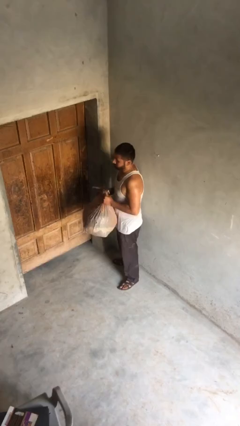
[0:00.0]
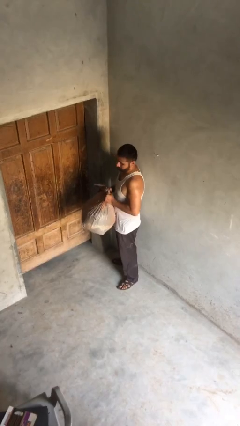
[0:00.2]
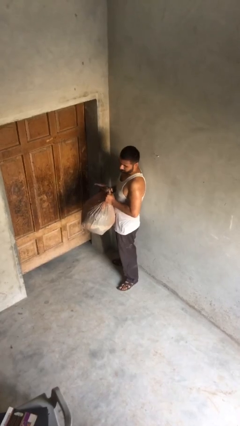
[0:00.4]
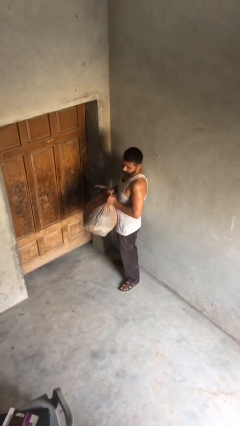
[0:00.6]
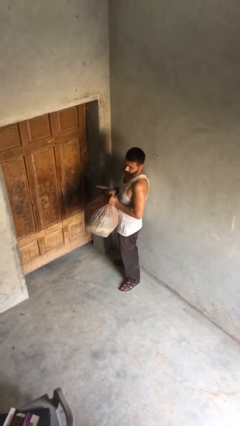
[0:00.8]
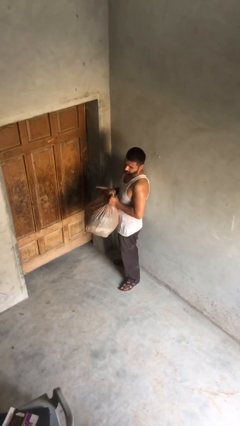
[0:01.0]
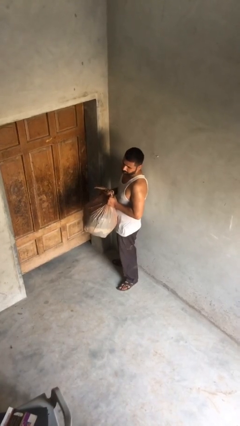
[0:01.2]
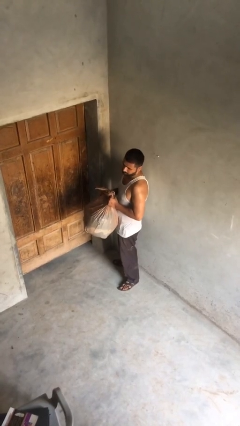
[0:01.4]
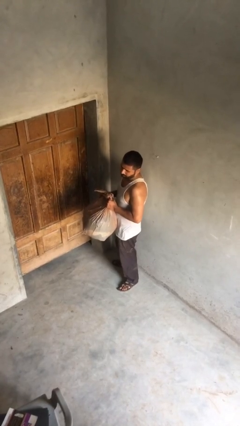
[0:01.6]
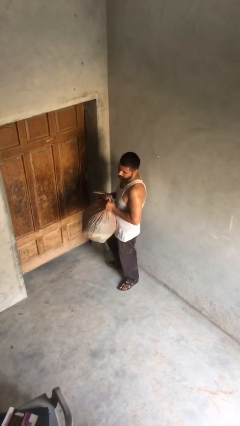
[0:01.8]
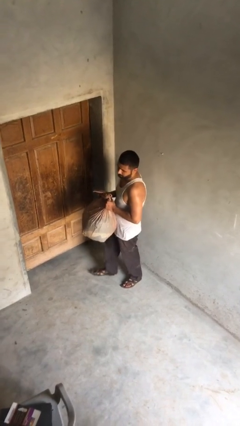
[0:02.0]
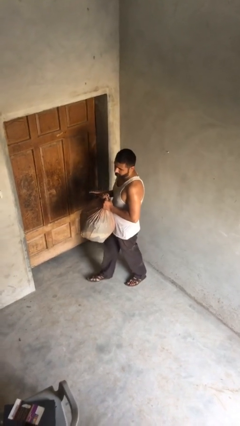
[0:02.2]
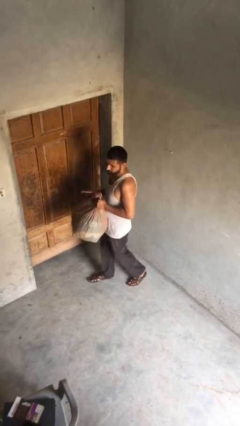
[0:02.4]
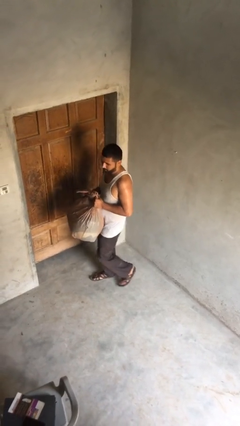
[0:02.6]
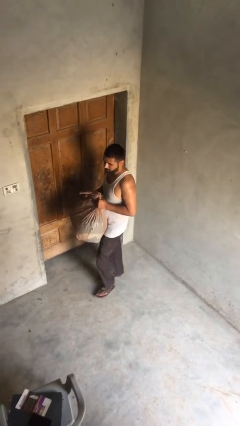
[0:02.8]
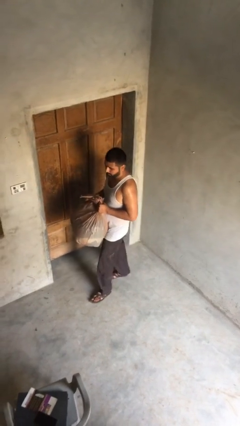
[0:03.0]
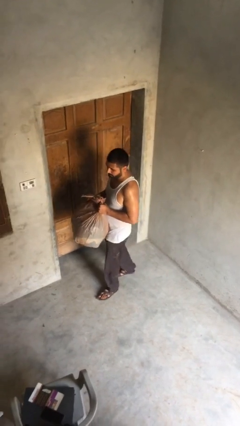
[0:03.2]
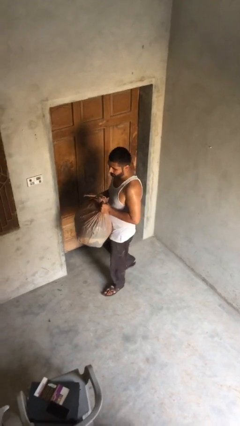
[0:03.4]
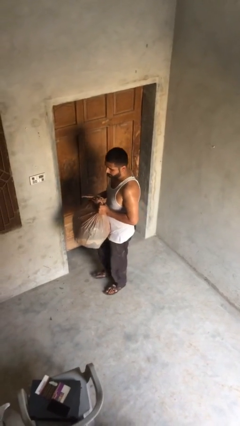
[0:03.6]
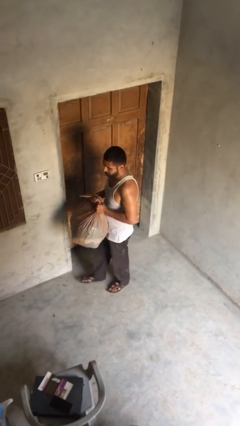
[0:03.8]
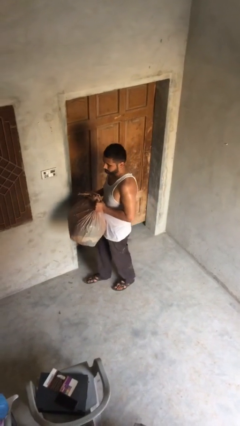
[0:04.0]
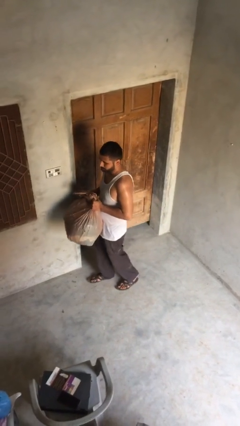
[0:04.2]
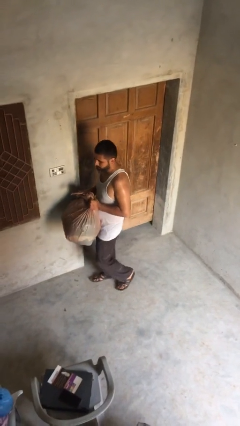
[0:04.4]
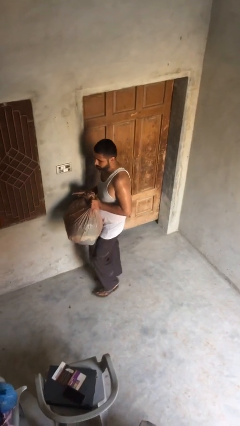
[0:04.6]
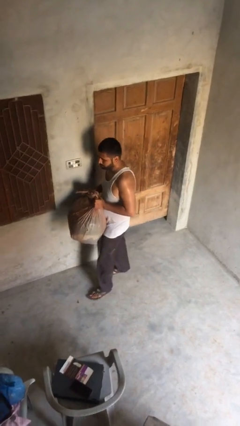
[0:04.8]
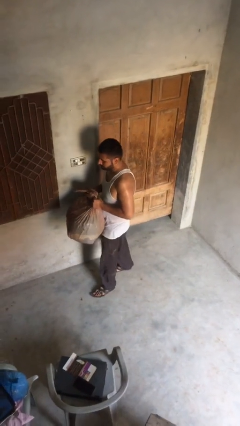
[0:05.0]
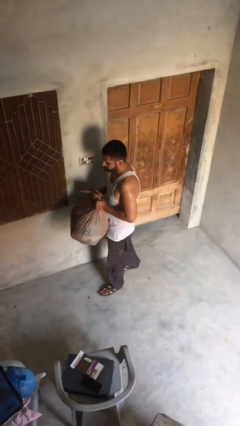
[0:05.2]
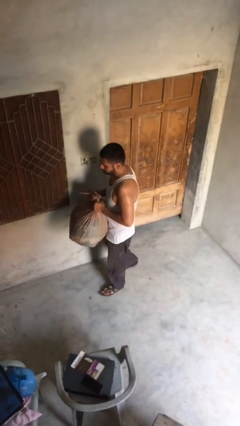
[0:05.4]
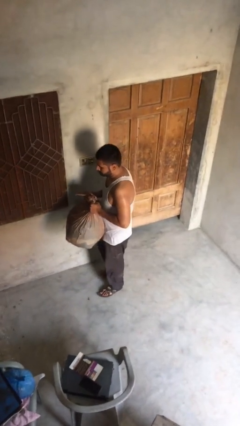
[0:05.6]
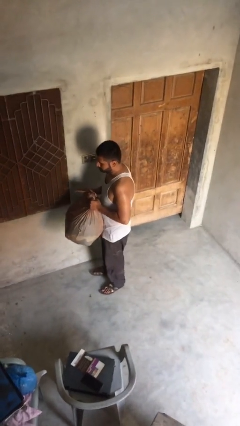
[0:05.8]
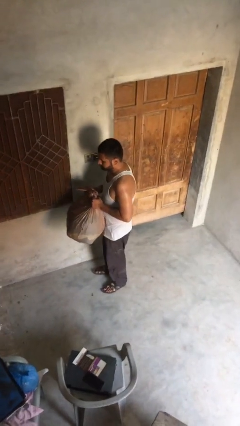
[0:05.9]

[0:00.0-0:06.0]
person carries heavy object

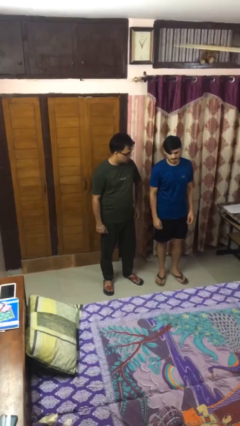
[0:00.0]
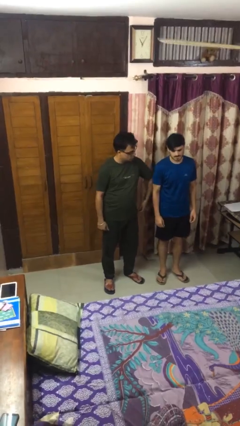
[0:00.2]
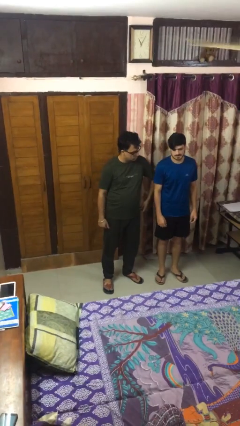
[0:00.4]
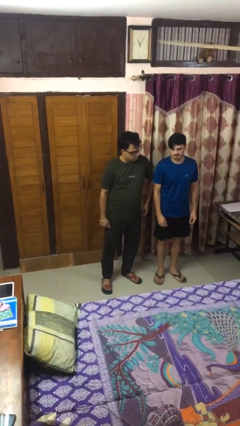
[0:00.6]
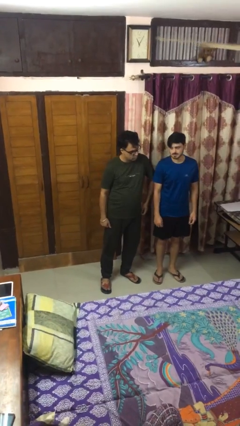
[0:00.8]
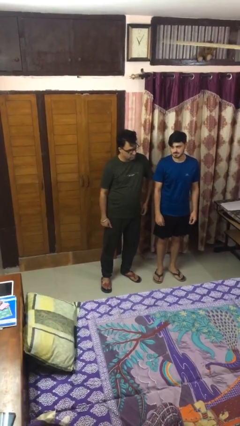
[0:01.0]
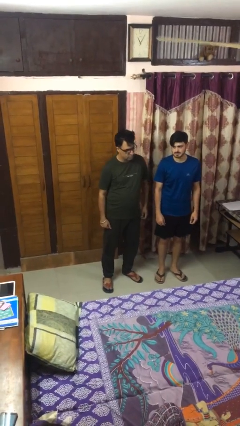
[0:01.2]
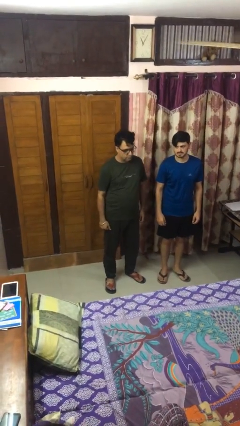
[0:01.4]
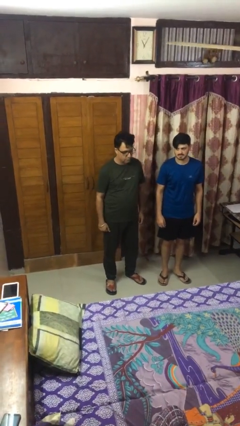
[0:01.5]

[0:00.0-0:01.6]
person nudges person with elbow

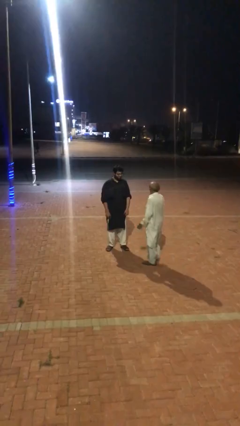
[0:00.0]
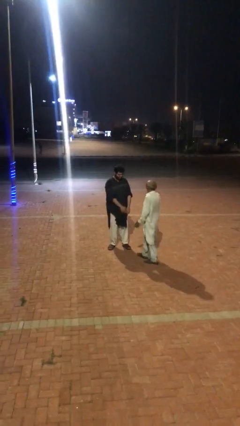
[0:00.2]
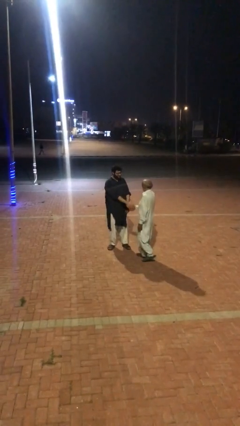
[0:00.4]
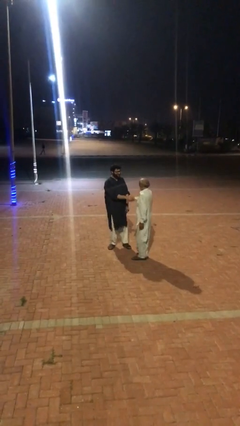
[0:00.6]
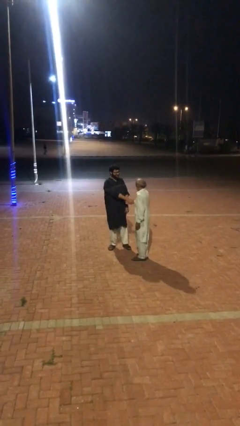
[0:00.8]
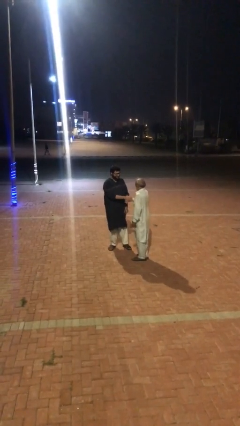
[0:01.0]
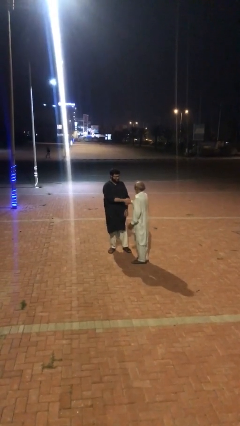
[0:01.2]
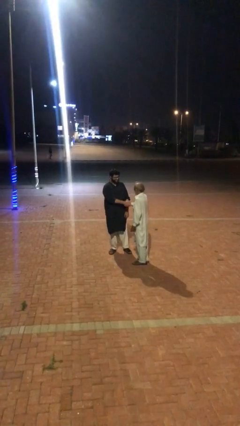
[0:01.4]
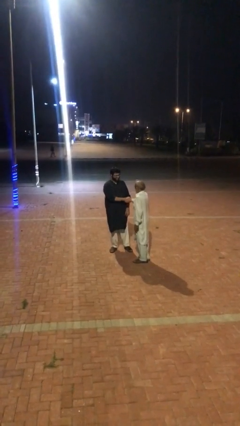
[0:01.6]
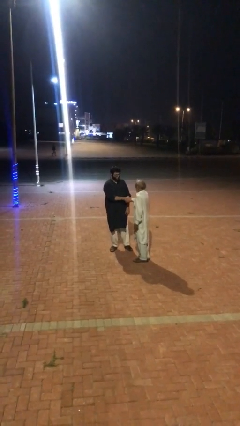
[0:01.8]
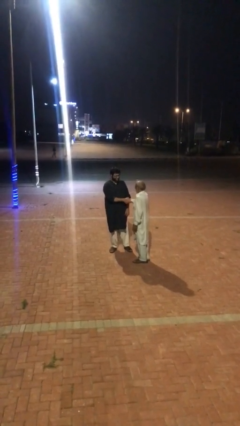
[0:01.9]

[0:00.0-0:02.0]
person shakes hand

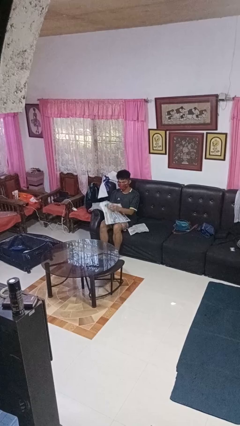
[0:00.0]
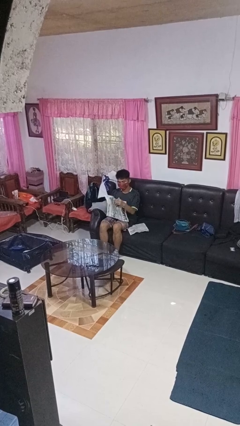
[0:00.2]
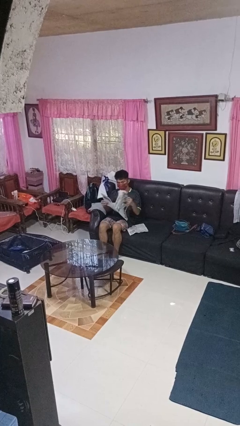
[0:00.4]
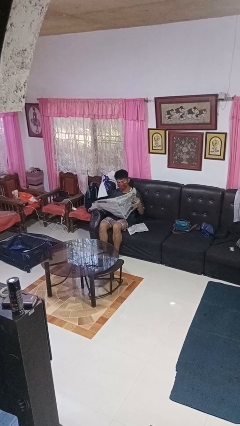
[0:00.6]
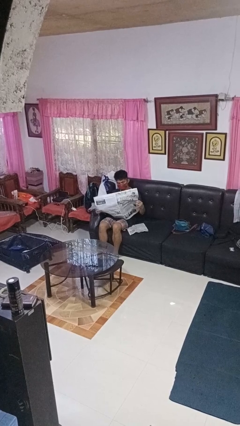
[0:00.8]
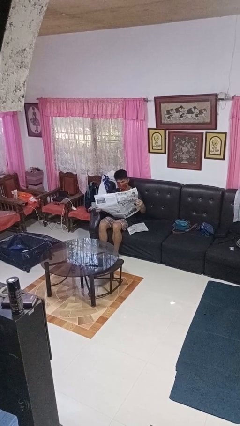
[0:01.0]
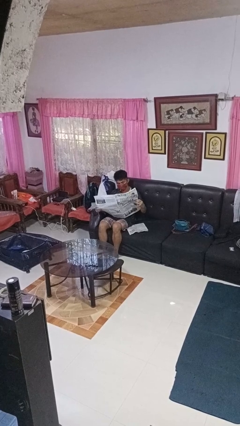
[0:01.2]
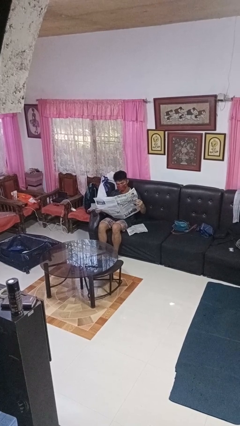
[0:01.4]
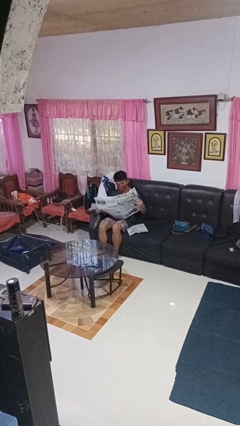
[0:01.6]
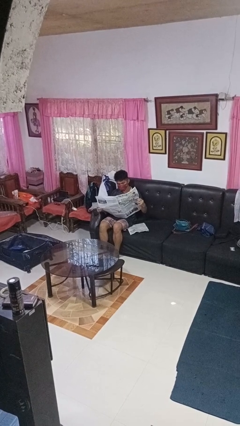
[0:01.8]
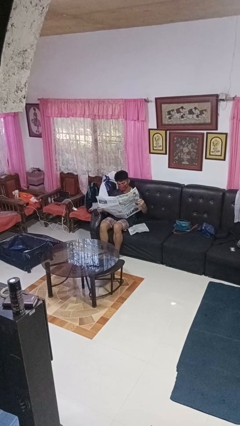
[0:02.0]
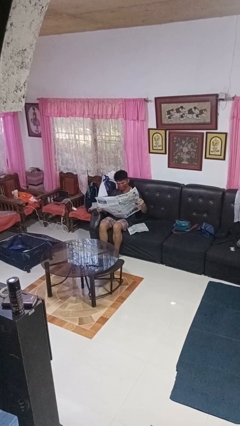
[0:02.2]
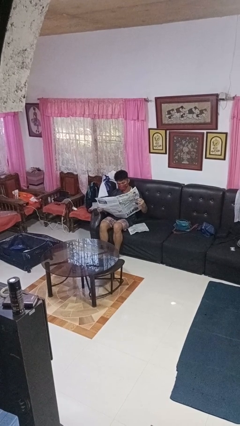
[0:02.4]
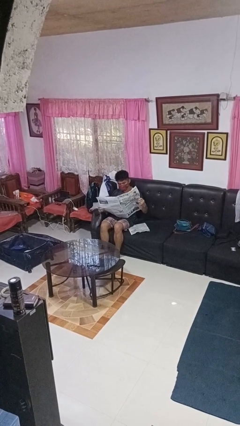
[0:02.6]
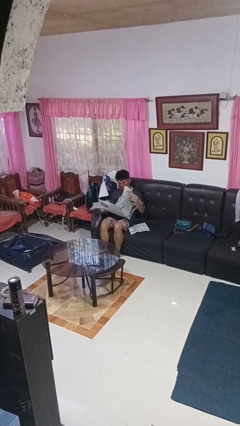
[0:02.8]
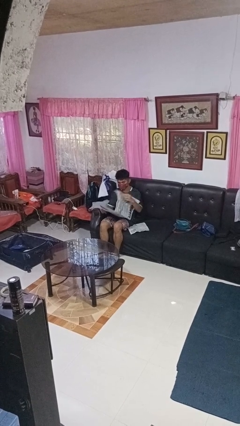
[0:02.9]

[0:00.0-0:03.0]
person reads newspaper

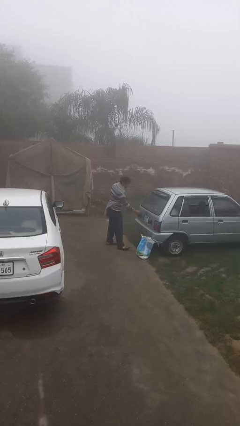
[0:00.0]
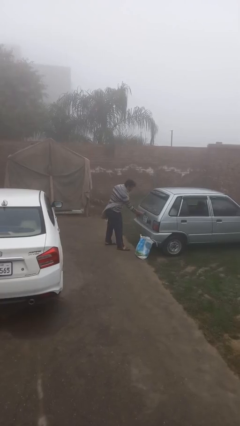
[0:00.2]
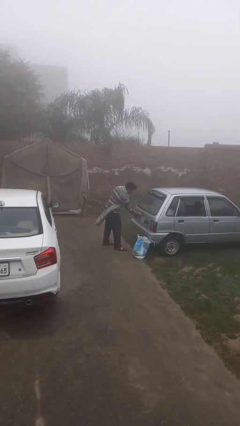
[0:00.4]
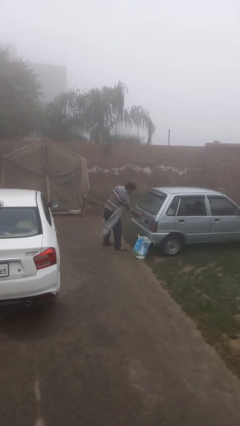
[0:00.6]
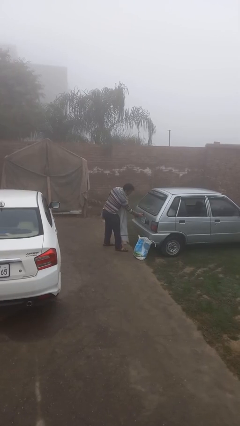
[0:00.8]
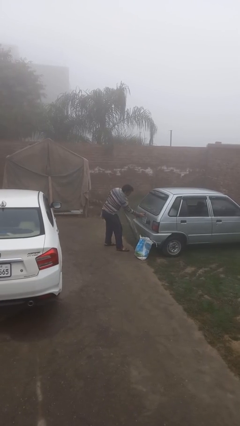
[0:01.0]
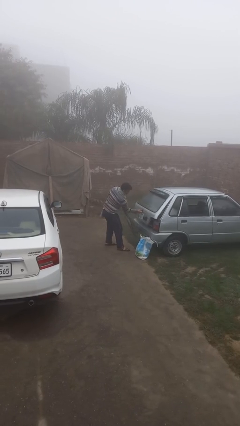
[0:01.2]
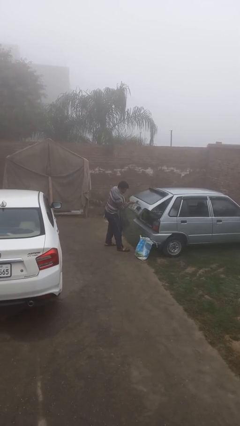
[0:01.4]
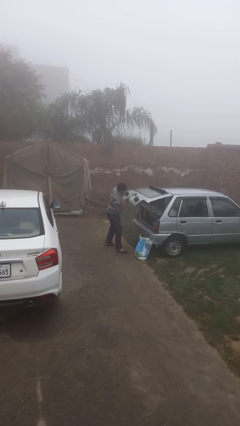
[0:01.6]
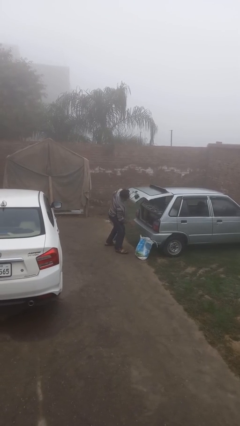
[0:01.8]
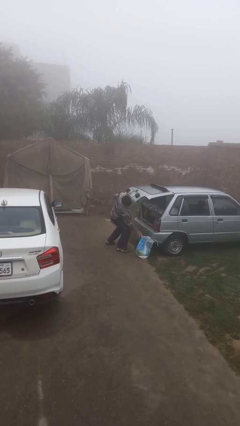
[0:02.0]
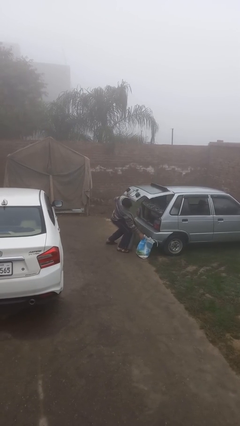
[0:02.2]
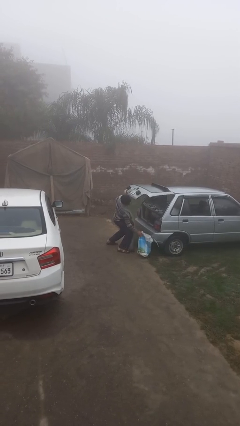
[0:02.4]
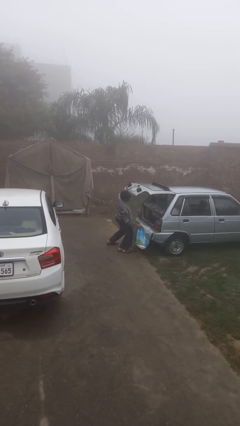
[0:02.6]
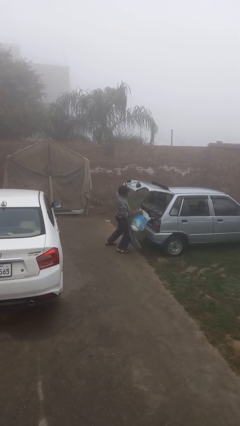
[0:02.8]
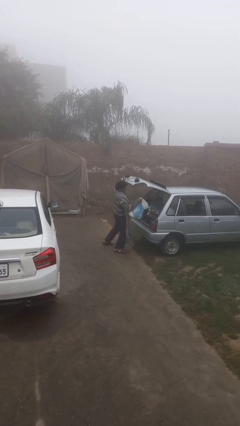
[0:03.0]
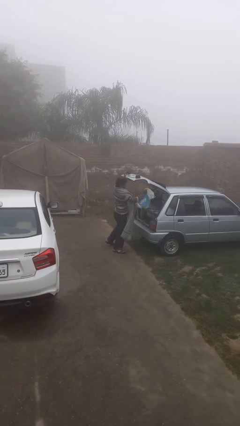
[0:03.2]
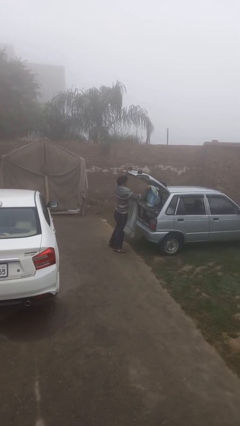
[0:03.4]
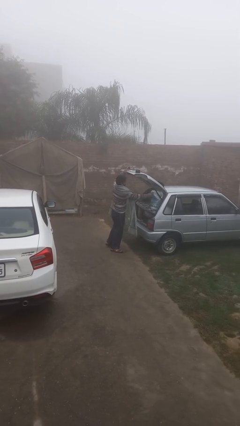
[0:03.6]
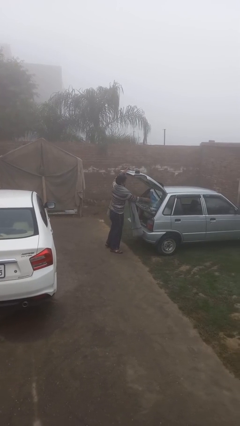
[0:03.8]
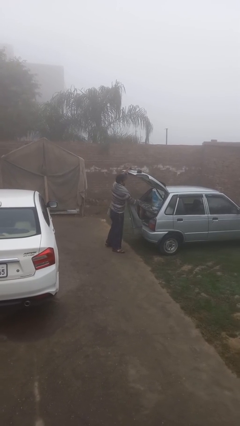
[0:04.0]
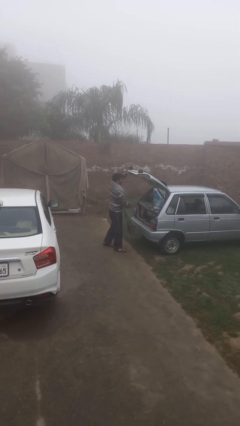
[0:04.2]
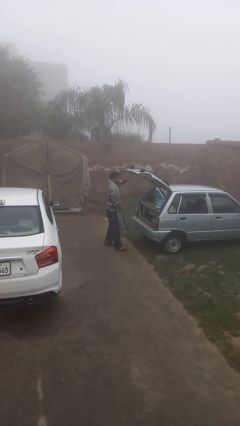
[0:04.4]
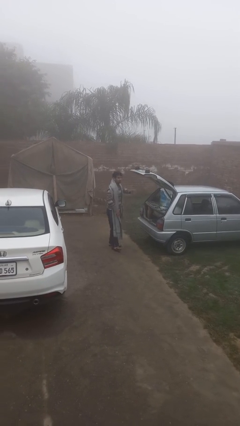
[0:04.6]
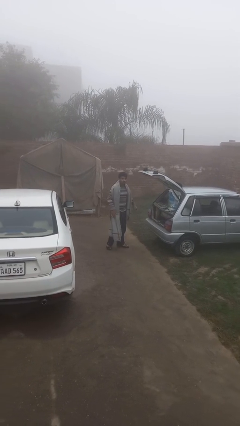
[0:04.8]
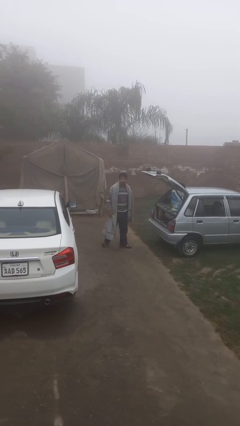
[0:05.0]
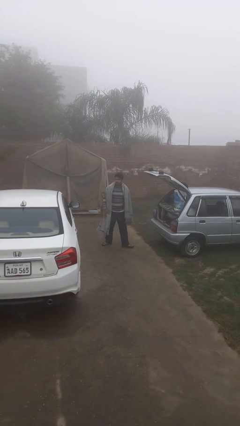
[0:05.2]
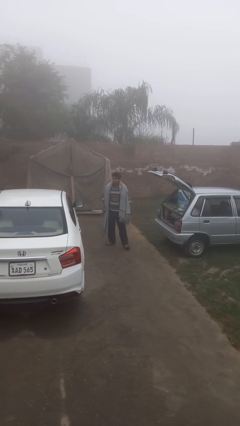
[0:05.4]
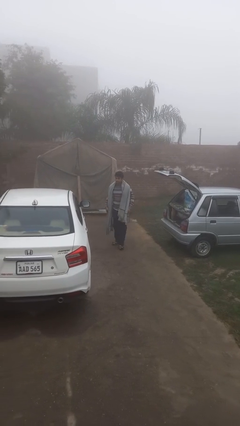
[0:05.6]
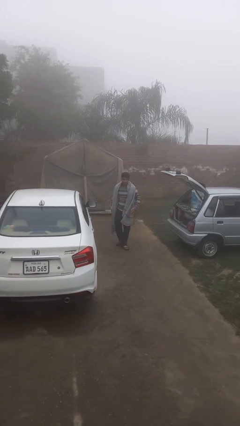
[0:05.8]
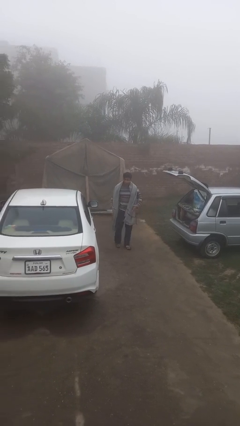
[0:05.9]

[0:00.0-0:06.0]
person loads car
